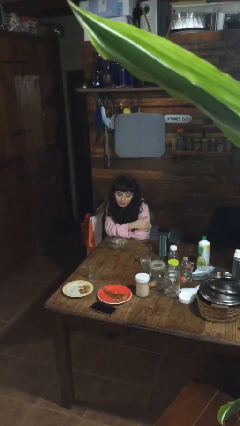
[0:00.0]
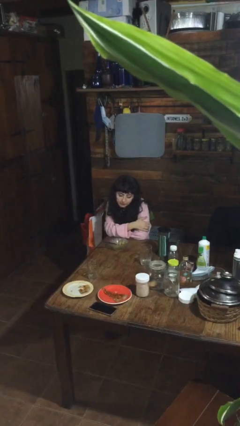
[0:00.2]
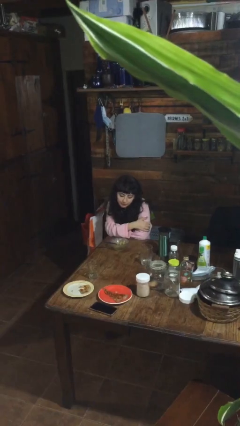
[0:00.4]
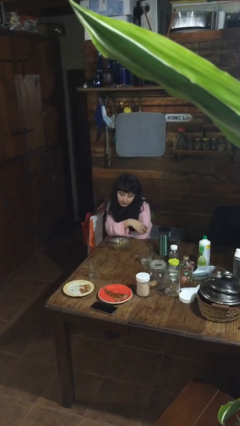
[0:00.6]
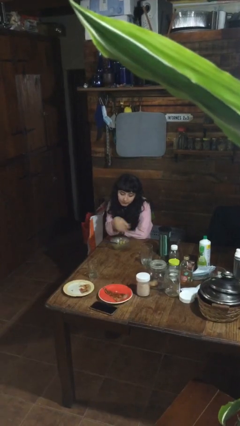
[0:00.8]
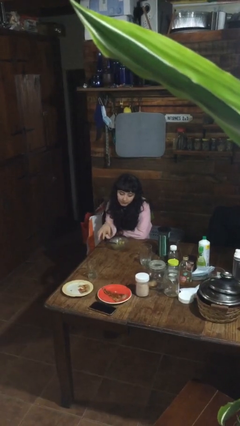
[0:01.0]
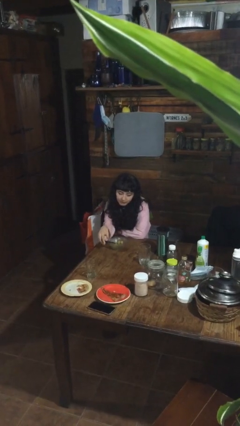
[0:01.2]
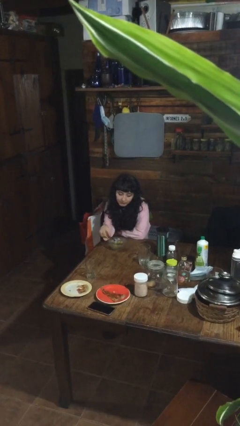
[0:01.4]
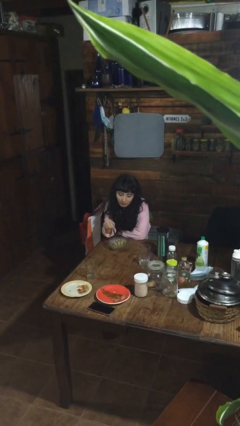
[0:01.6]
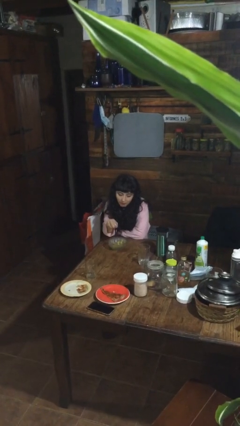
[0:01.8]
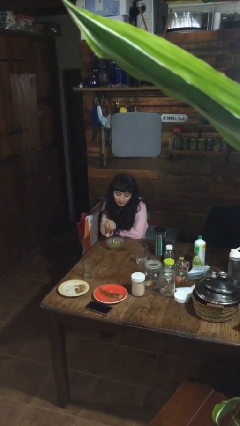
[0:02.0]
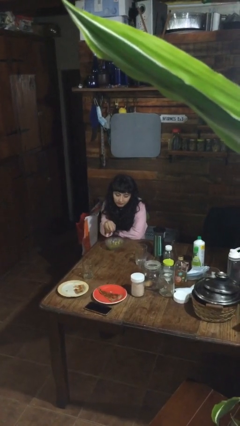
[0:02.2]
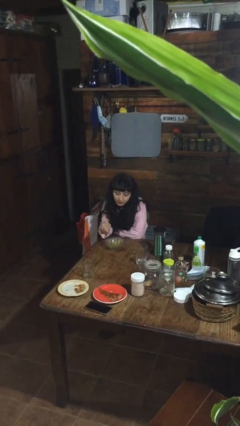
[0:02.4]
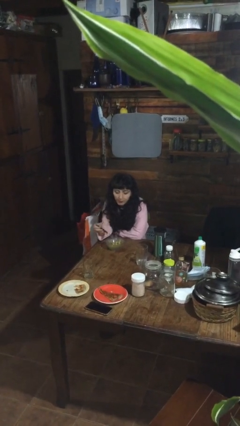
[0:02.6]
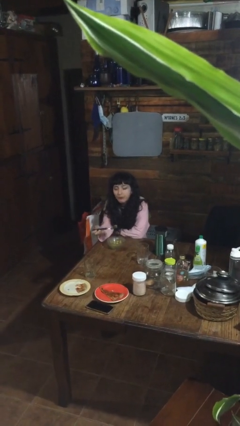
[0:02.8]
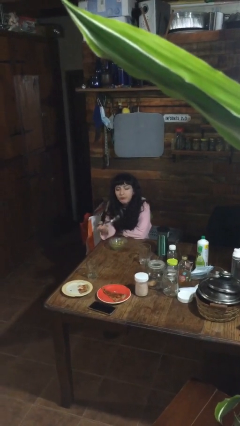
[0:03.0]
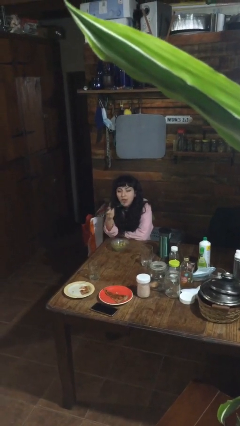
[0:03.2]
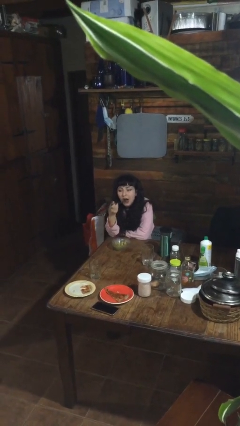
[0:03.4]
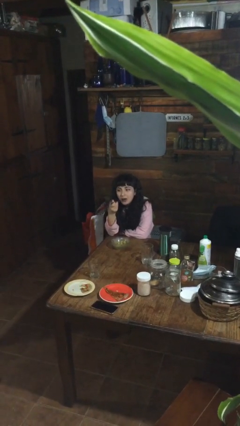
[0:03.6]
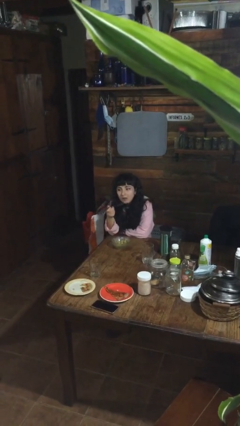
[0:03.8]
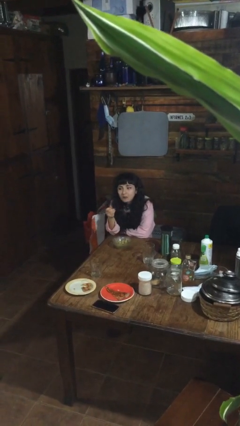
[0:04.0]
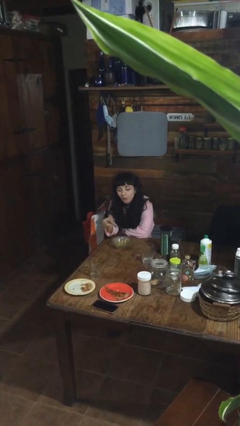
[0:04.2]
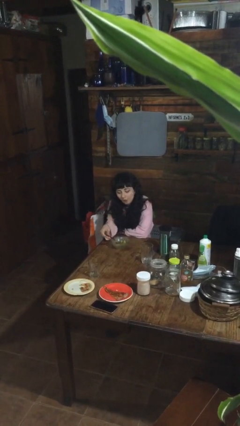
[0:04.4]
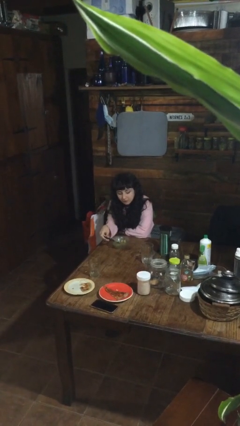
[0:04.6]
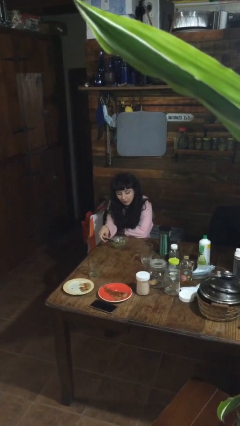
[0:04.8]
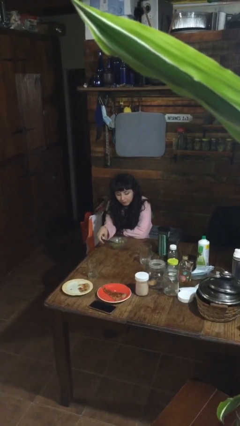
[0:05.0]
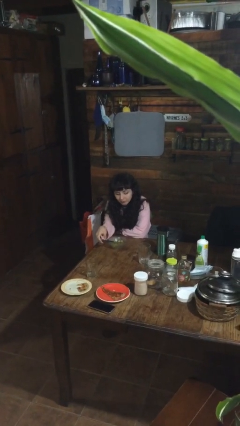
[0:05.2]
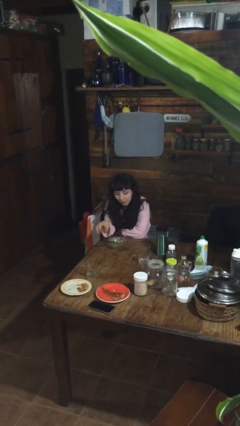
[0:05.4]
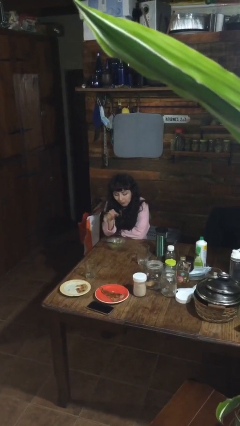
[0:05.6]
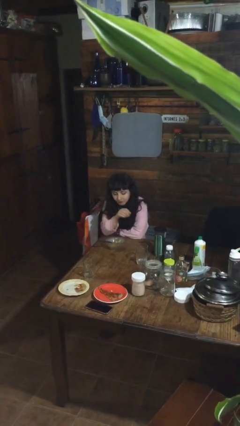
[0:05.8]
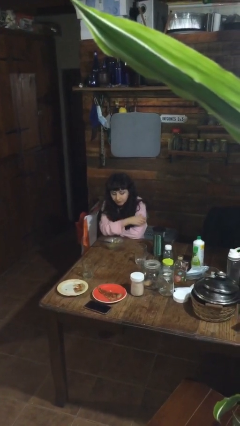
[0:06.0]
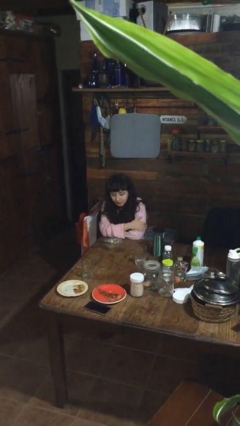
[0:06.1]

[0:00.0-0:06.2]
person eats with utensil

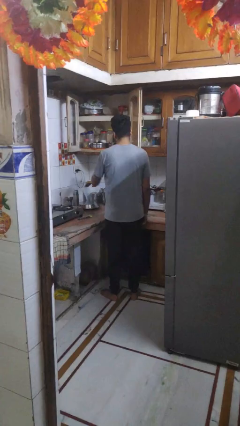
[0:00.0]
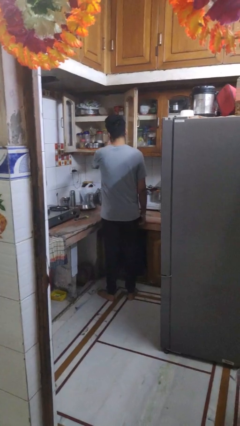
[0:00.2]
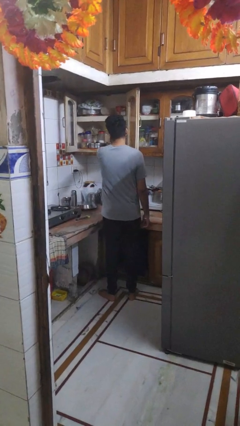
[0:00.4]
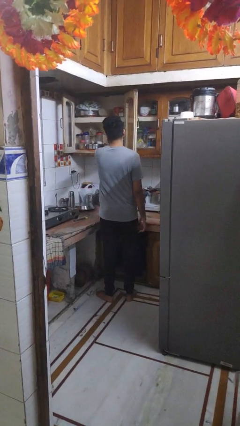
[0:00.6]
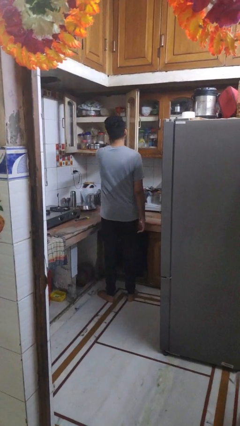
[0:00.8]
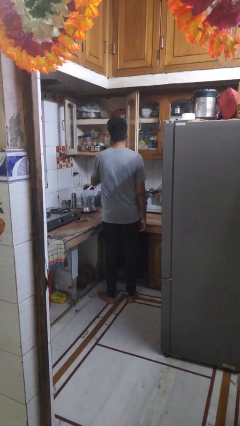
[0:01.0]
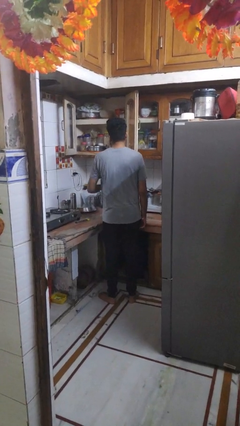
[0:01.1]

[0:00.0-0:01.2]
person puts object in cabinet

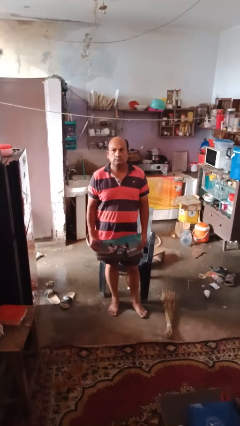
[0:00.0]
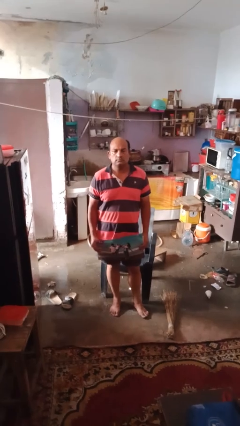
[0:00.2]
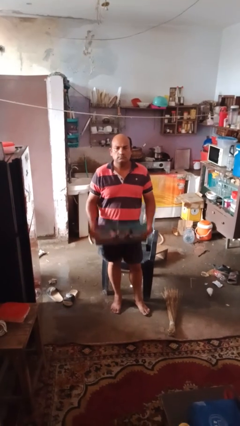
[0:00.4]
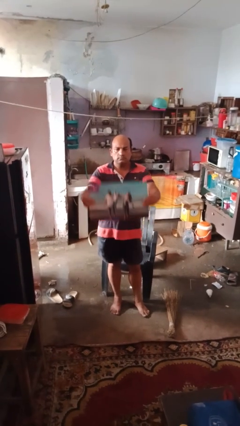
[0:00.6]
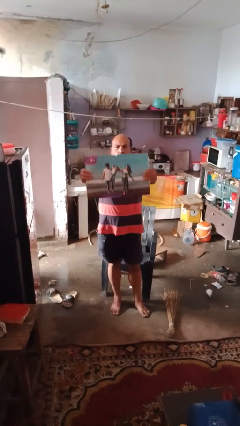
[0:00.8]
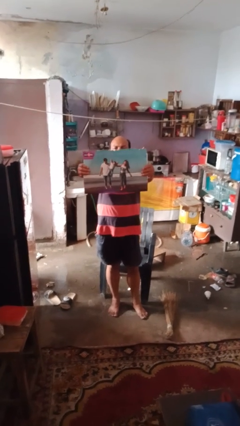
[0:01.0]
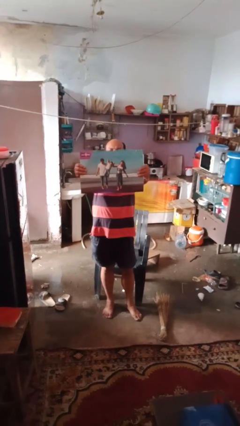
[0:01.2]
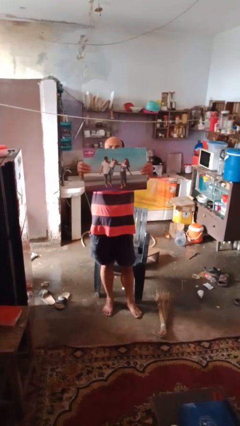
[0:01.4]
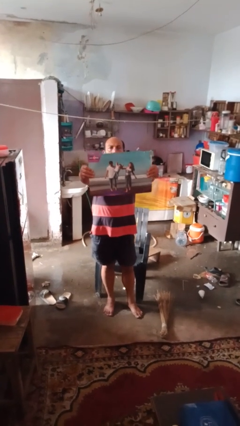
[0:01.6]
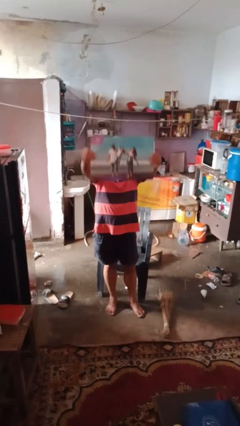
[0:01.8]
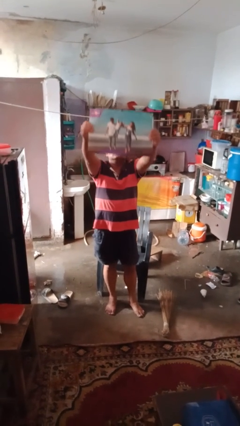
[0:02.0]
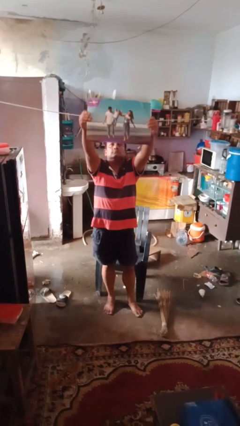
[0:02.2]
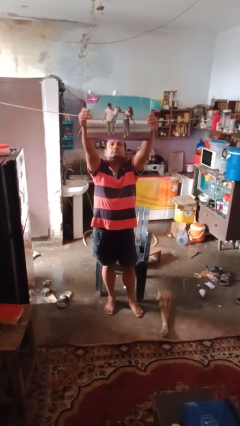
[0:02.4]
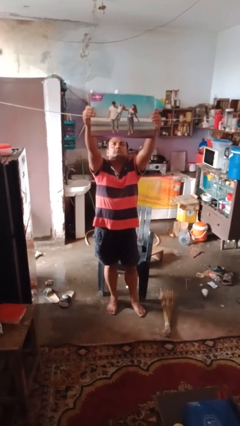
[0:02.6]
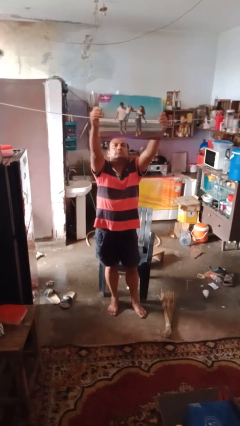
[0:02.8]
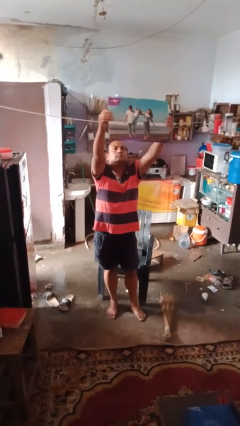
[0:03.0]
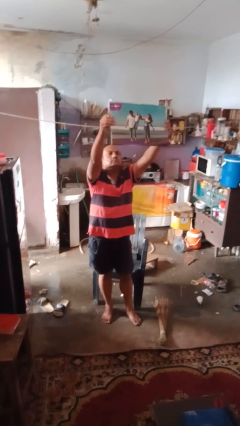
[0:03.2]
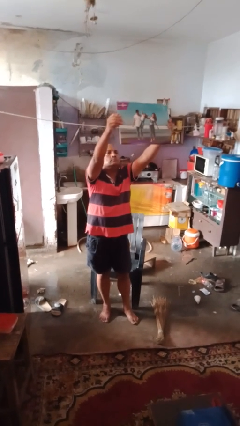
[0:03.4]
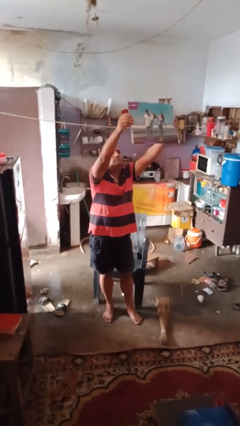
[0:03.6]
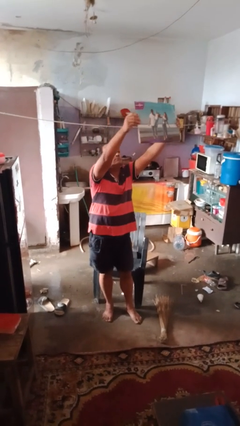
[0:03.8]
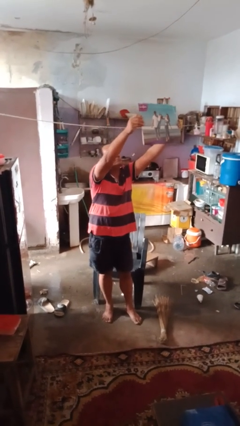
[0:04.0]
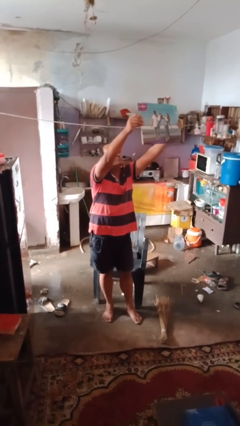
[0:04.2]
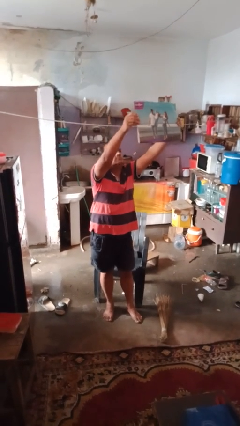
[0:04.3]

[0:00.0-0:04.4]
person holds object above head

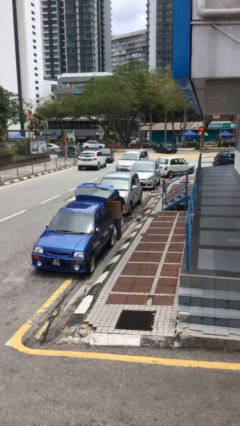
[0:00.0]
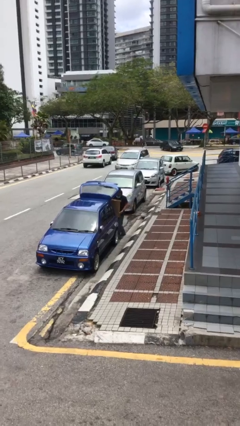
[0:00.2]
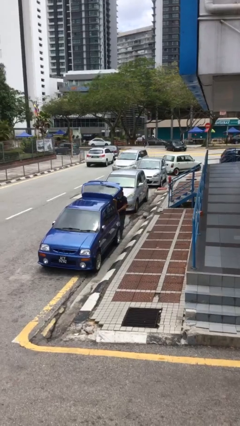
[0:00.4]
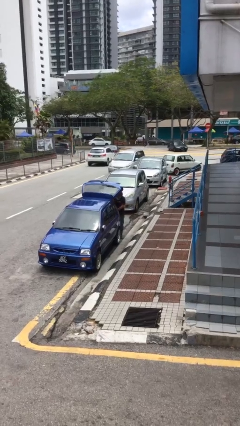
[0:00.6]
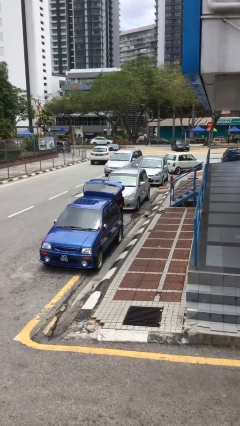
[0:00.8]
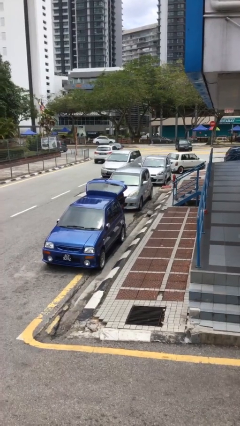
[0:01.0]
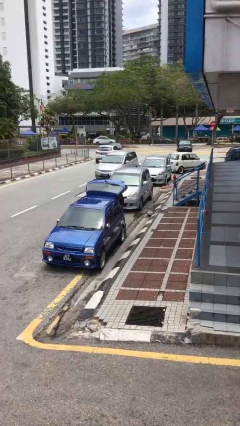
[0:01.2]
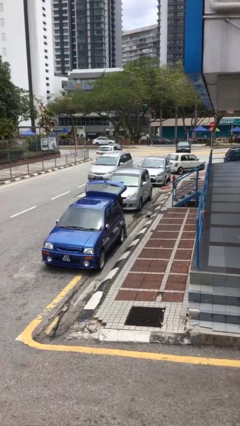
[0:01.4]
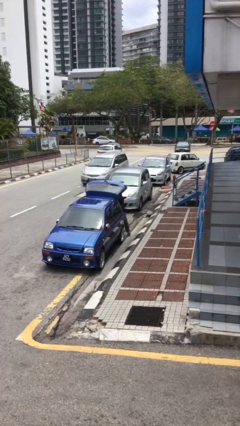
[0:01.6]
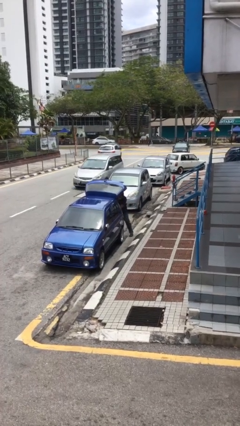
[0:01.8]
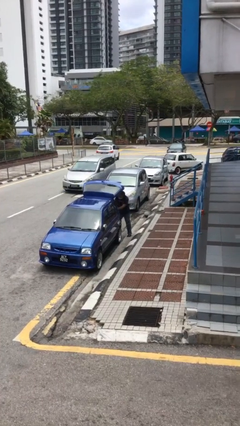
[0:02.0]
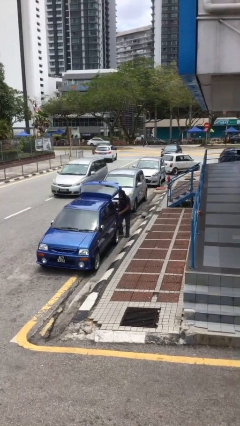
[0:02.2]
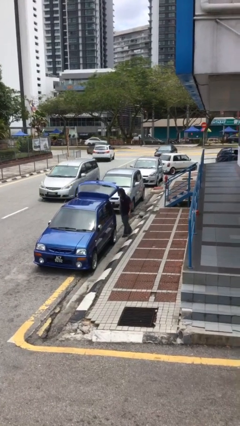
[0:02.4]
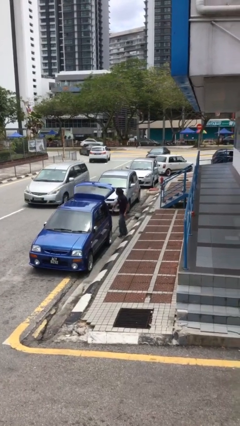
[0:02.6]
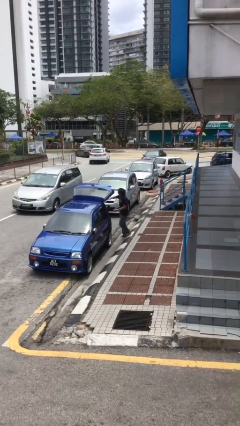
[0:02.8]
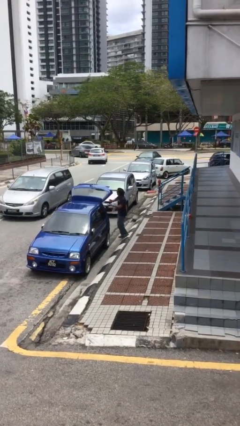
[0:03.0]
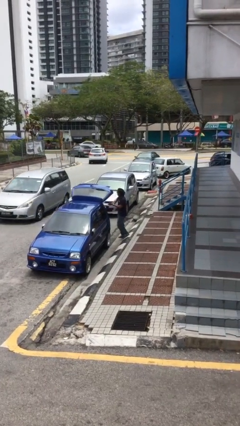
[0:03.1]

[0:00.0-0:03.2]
person loads car

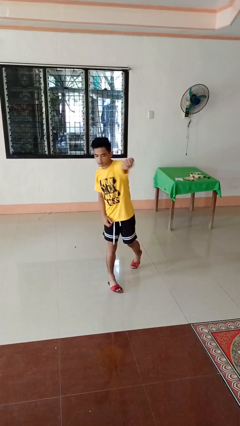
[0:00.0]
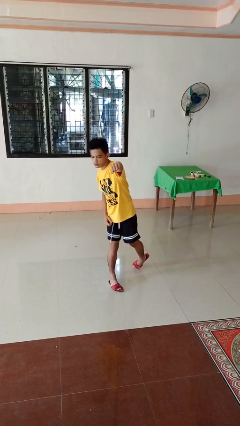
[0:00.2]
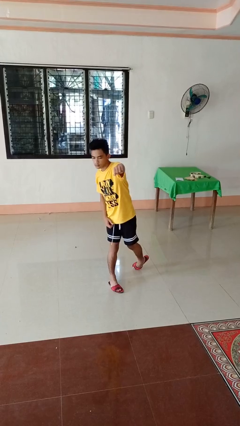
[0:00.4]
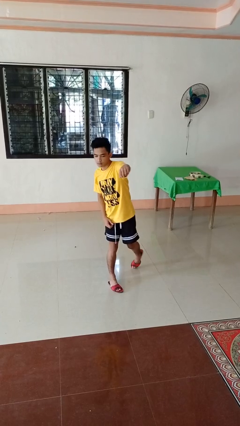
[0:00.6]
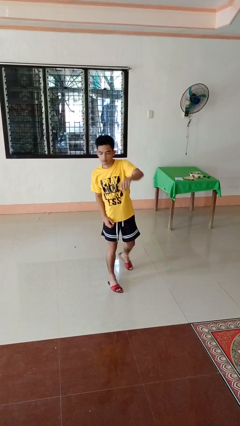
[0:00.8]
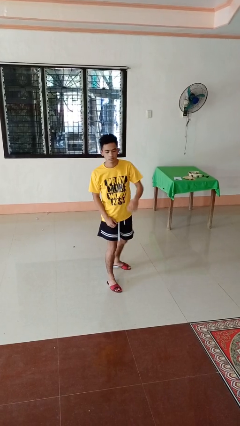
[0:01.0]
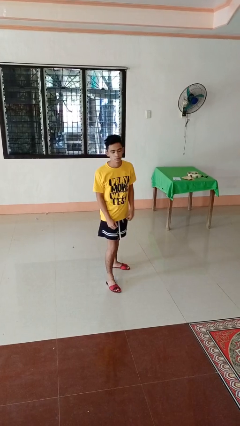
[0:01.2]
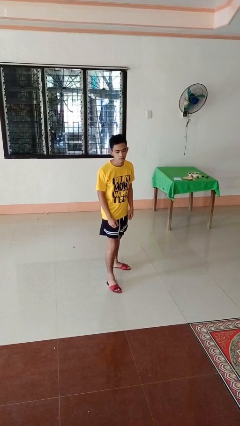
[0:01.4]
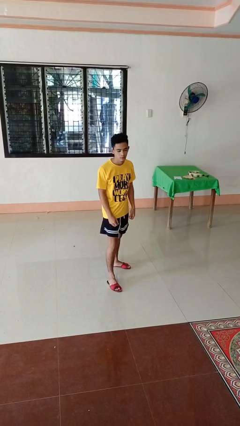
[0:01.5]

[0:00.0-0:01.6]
person punches

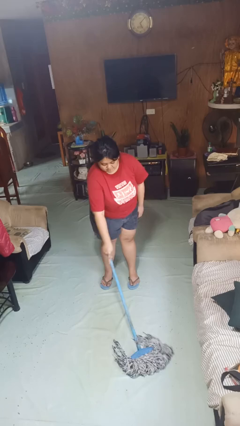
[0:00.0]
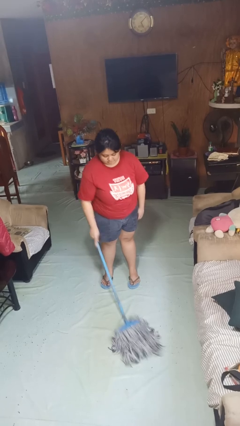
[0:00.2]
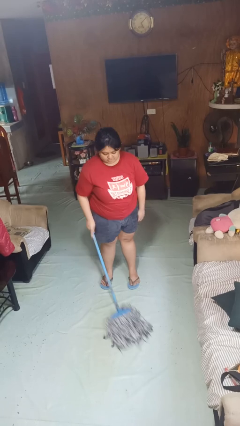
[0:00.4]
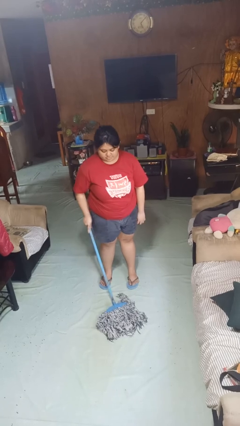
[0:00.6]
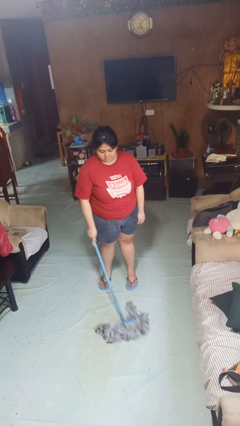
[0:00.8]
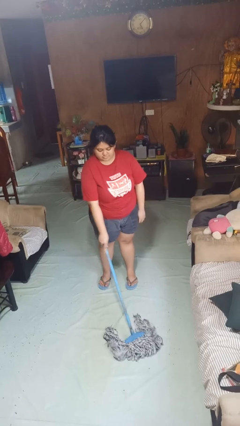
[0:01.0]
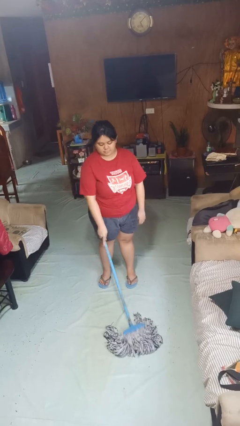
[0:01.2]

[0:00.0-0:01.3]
person mops
